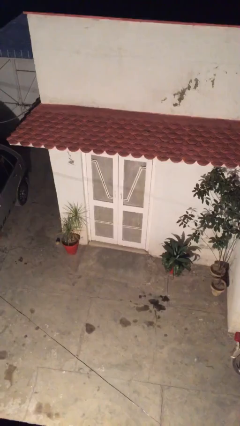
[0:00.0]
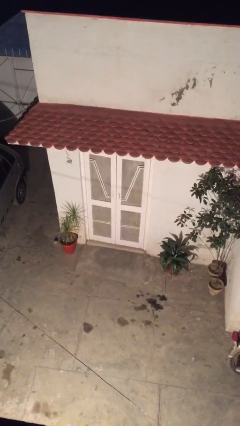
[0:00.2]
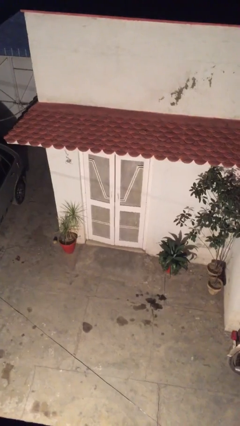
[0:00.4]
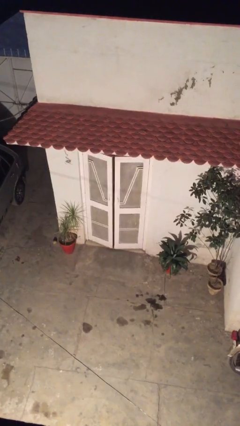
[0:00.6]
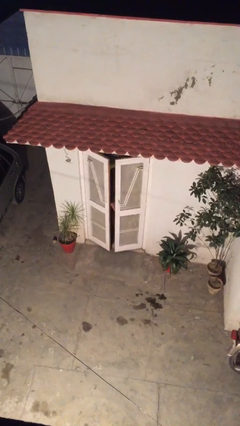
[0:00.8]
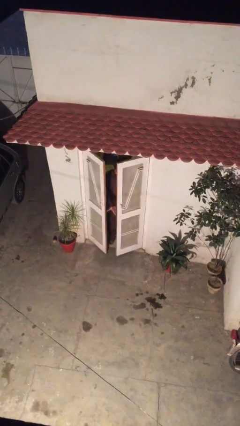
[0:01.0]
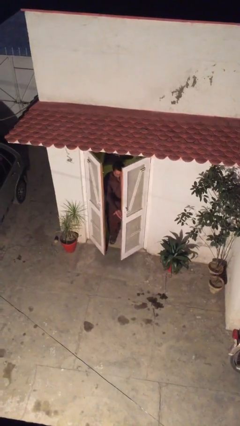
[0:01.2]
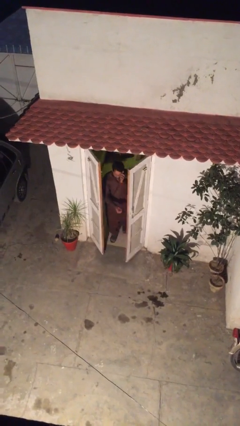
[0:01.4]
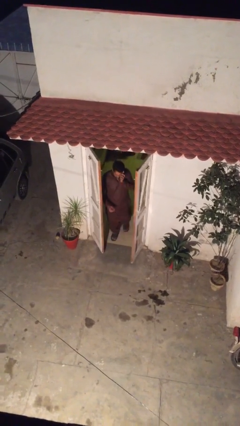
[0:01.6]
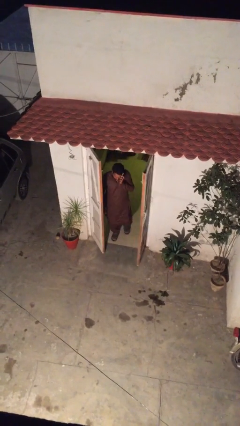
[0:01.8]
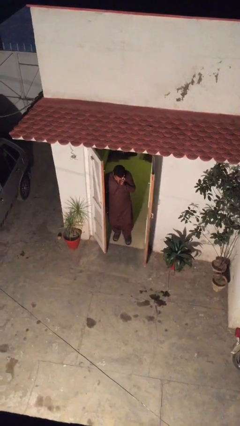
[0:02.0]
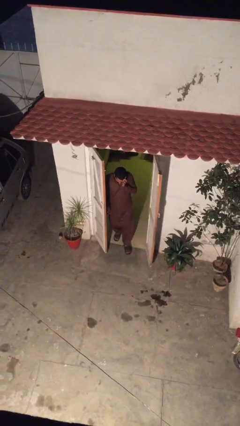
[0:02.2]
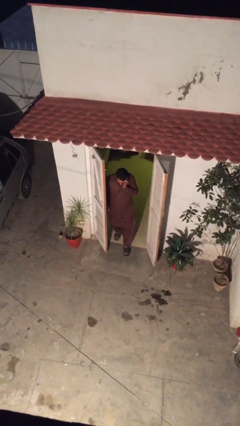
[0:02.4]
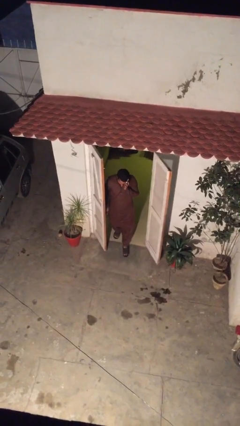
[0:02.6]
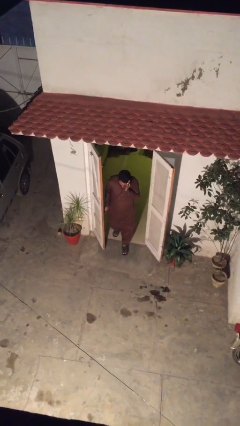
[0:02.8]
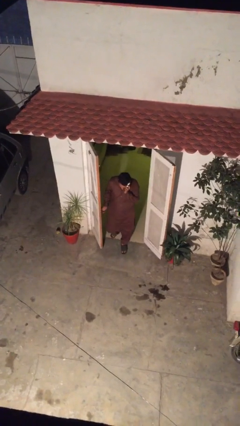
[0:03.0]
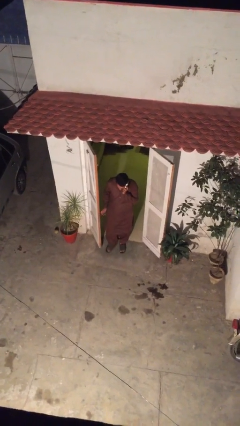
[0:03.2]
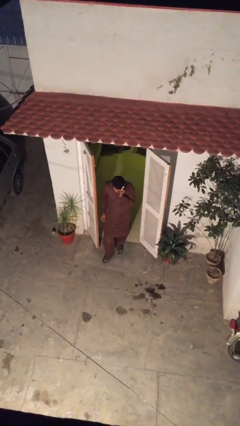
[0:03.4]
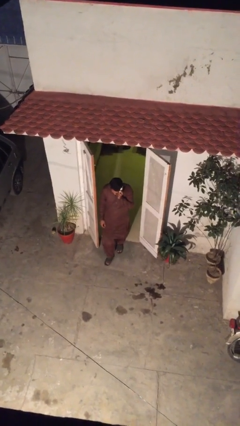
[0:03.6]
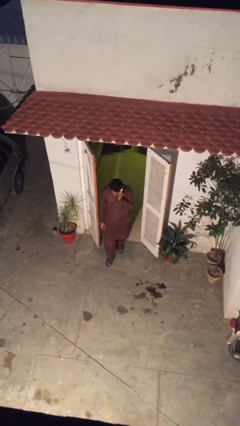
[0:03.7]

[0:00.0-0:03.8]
person opens facility door

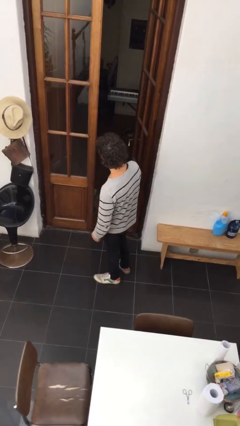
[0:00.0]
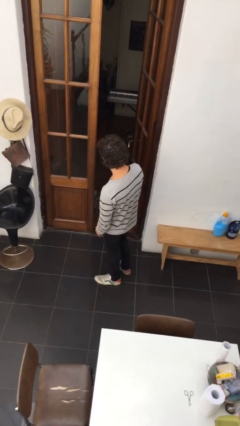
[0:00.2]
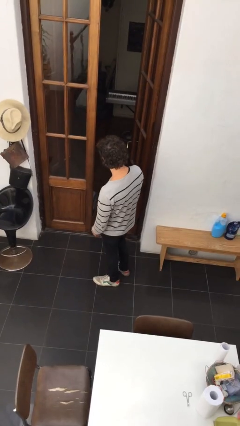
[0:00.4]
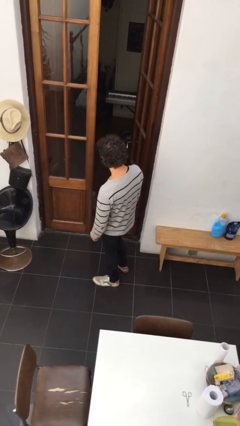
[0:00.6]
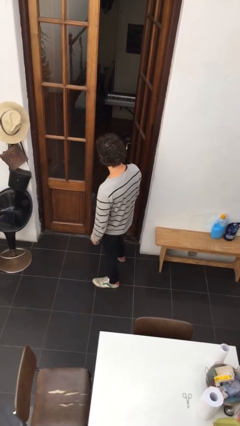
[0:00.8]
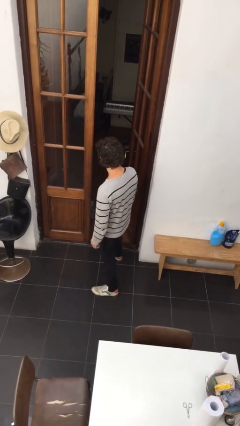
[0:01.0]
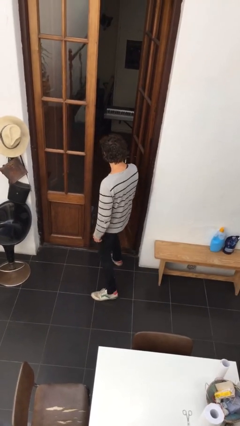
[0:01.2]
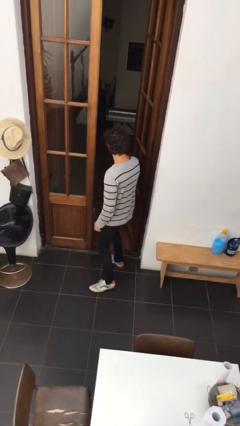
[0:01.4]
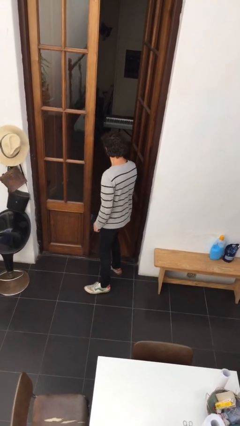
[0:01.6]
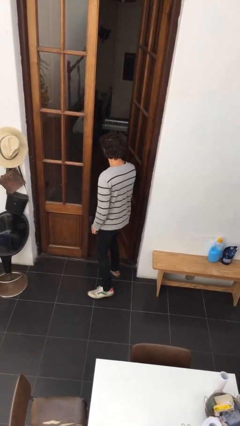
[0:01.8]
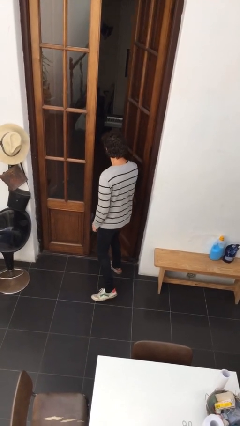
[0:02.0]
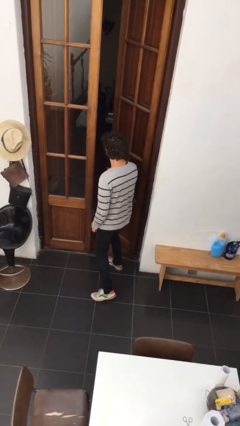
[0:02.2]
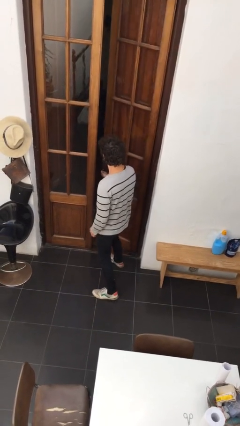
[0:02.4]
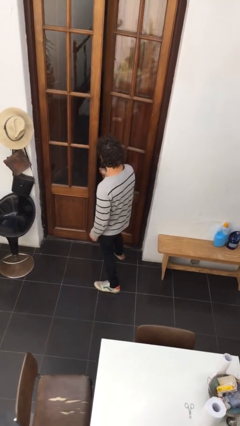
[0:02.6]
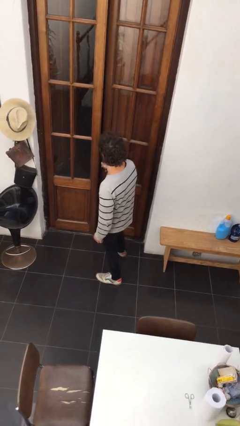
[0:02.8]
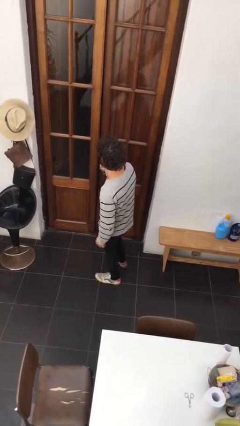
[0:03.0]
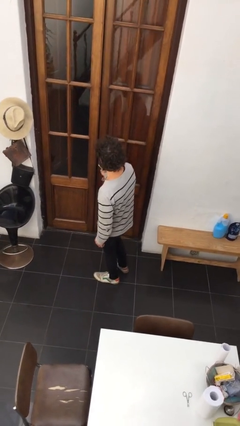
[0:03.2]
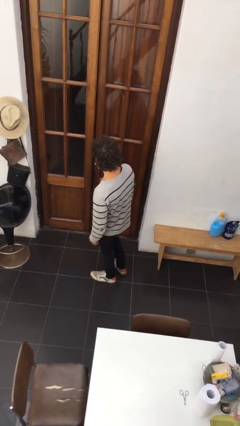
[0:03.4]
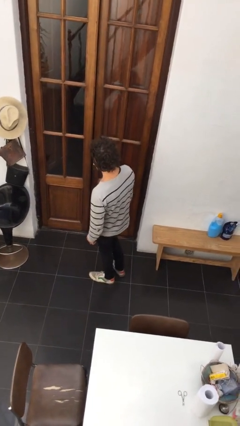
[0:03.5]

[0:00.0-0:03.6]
person closes facility door

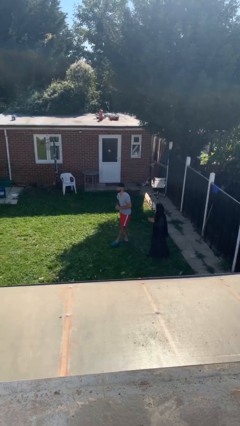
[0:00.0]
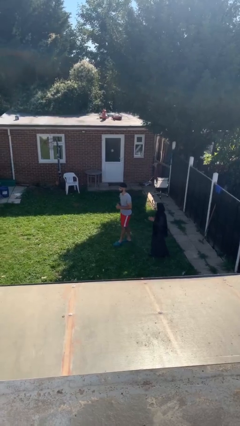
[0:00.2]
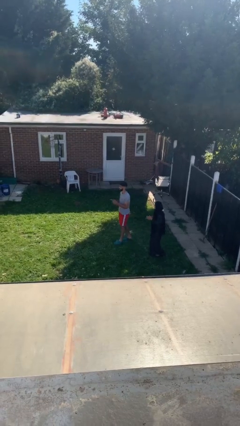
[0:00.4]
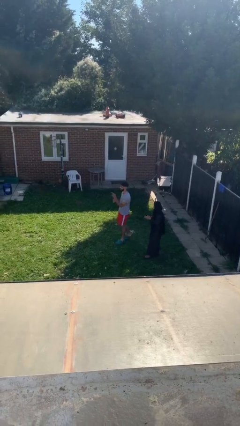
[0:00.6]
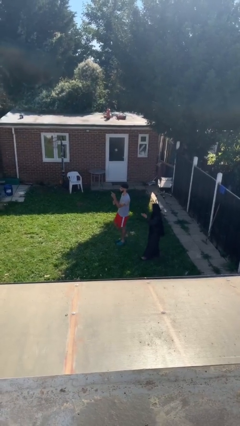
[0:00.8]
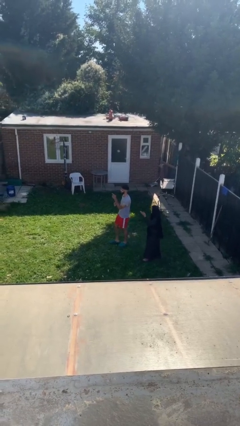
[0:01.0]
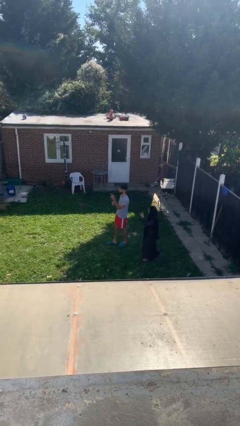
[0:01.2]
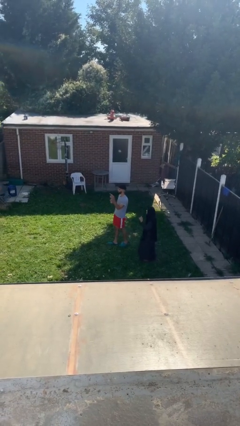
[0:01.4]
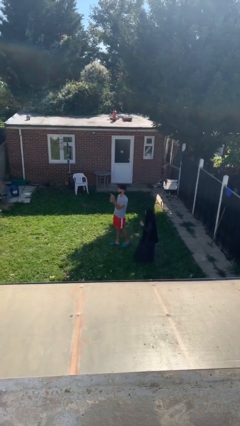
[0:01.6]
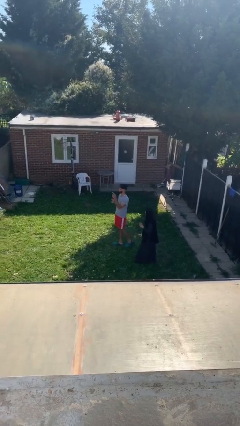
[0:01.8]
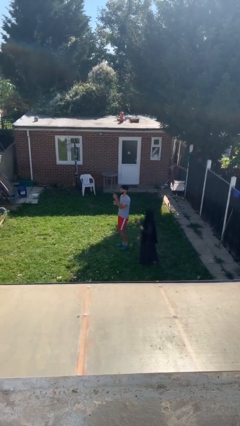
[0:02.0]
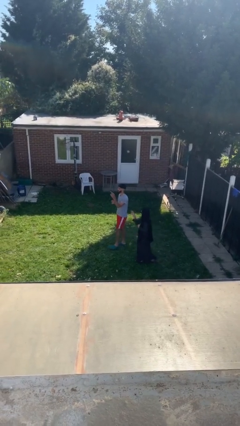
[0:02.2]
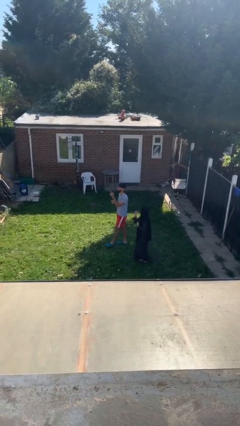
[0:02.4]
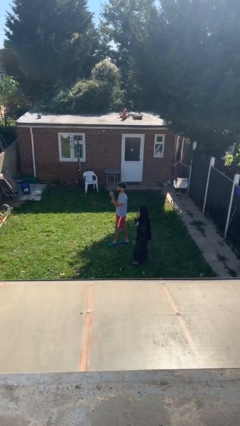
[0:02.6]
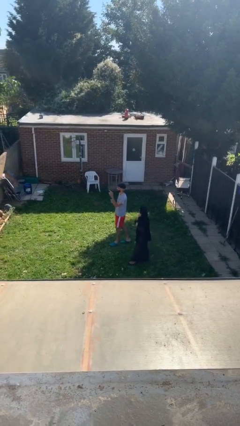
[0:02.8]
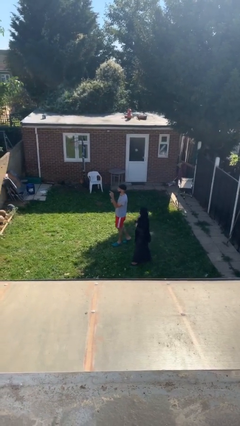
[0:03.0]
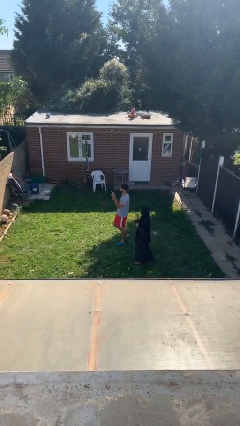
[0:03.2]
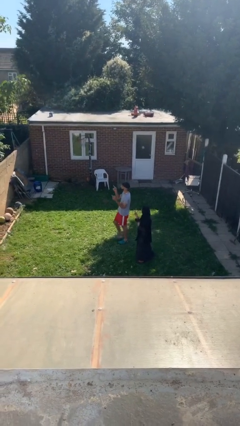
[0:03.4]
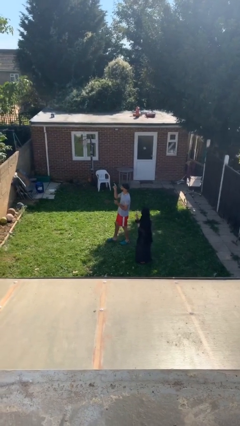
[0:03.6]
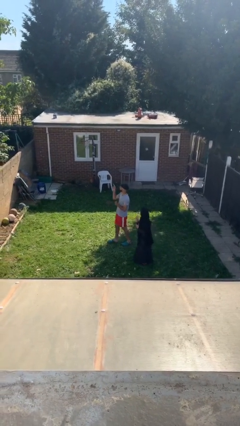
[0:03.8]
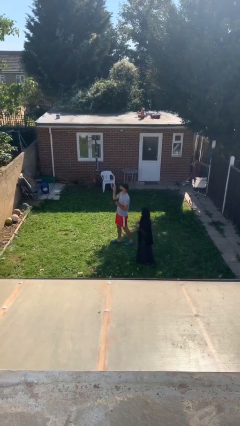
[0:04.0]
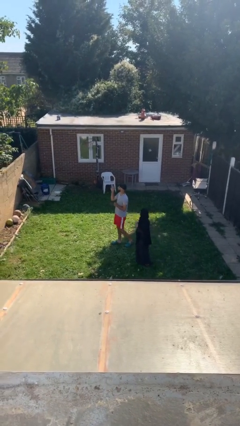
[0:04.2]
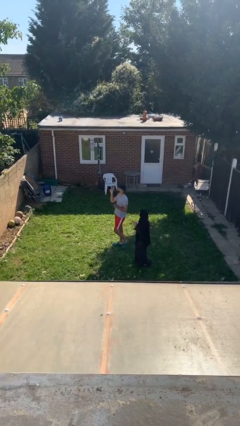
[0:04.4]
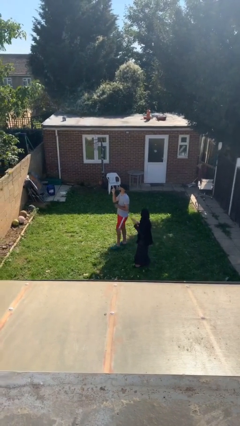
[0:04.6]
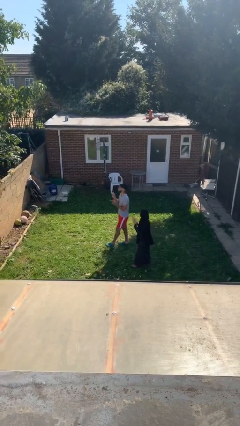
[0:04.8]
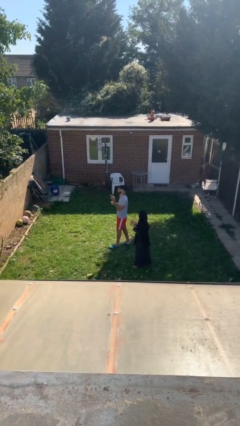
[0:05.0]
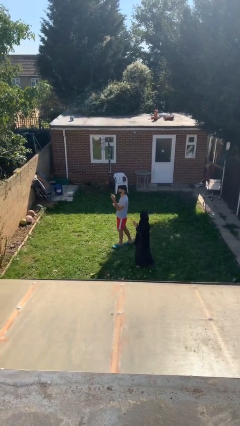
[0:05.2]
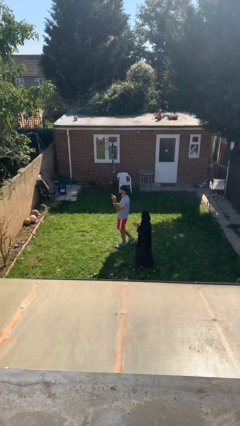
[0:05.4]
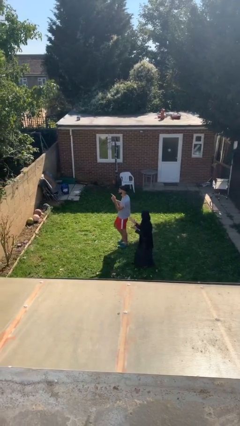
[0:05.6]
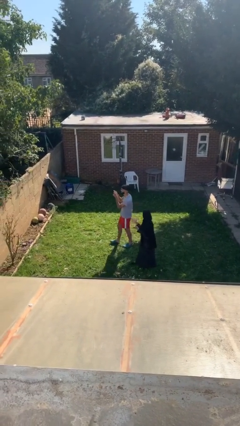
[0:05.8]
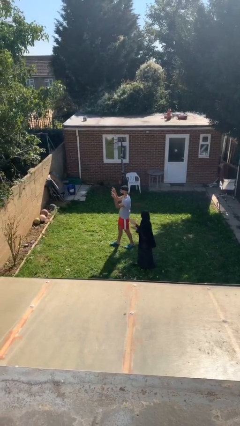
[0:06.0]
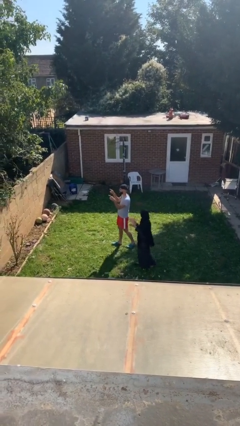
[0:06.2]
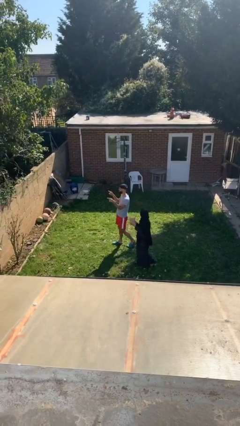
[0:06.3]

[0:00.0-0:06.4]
person talks to person

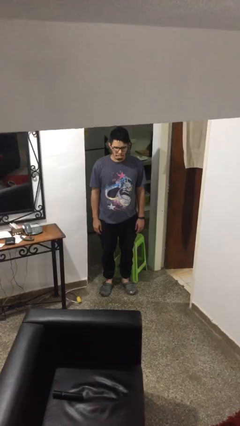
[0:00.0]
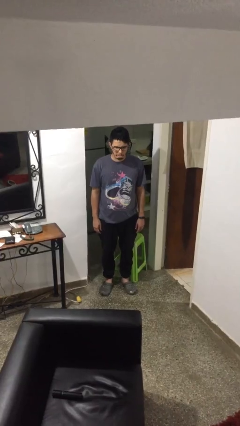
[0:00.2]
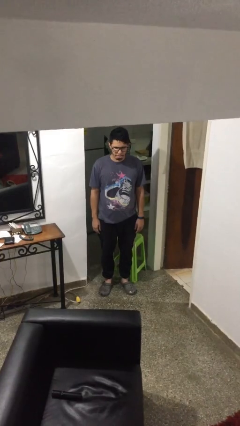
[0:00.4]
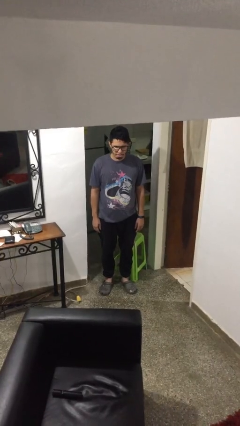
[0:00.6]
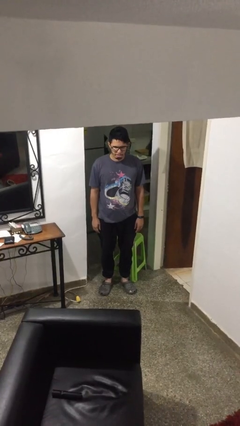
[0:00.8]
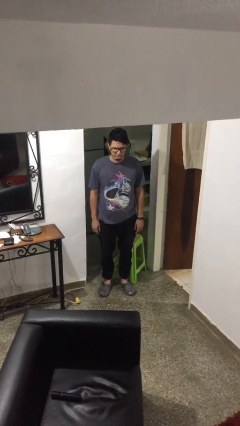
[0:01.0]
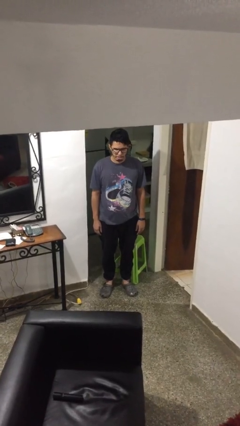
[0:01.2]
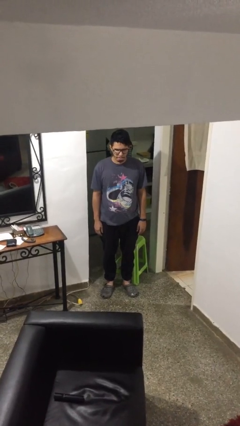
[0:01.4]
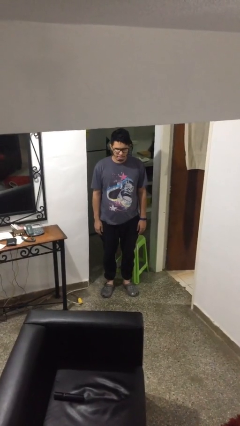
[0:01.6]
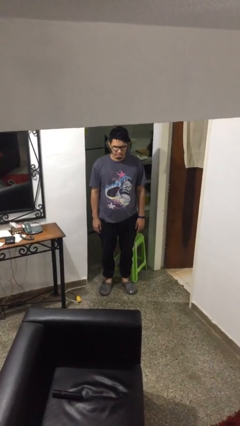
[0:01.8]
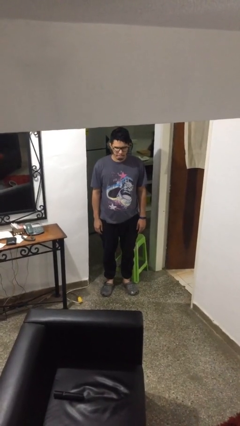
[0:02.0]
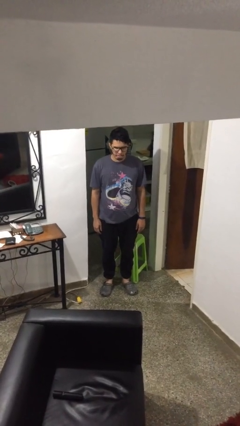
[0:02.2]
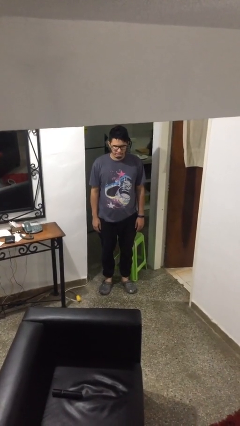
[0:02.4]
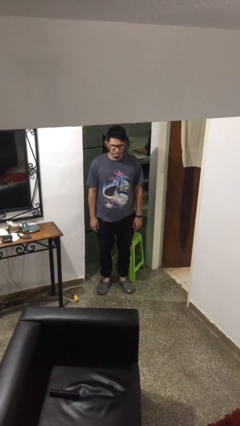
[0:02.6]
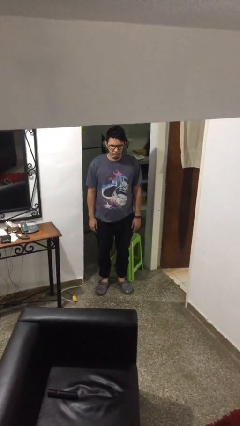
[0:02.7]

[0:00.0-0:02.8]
person sticks out tongue

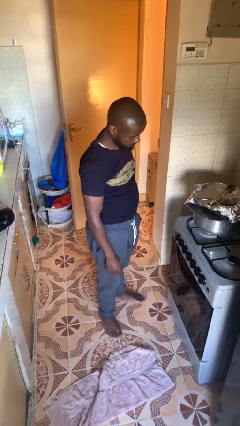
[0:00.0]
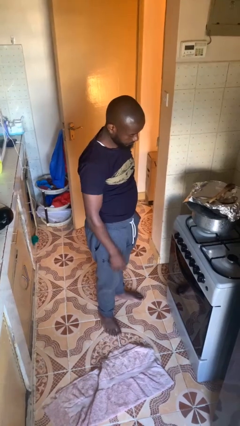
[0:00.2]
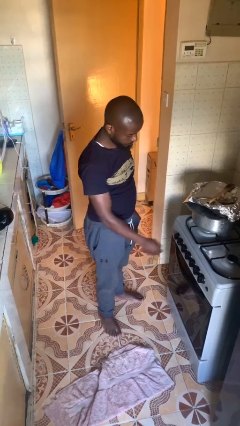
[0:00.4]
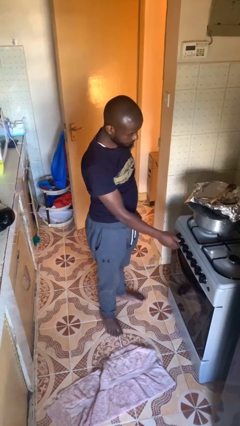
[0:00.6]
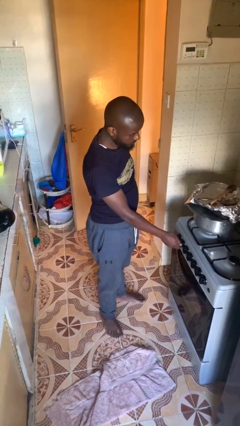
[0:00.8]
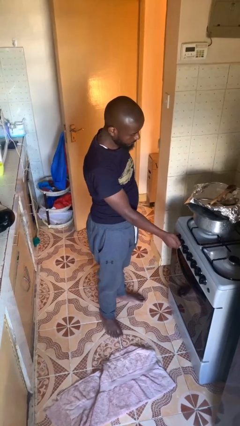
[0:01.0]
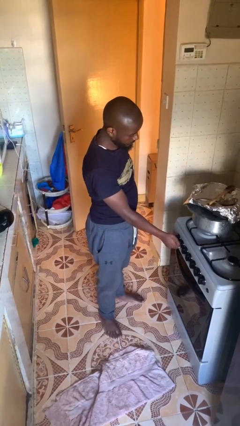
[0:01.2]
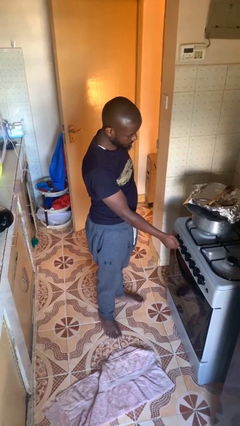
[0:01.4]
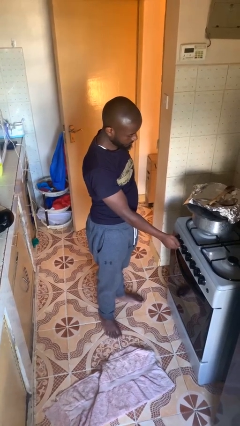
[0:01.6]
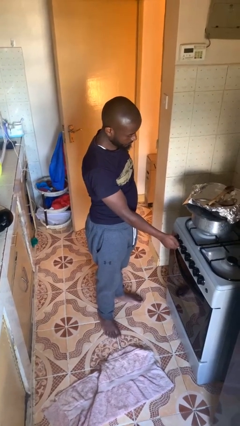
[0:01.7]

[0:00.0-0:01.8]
person adjusts thermostat
